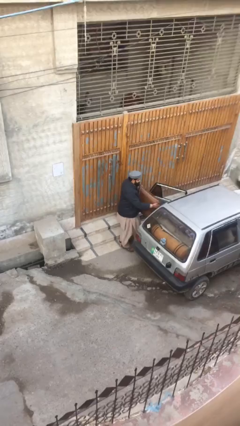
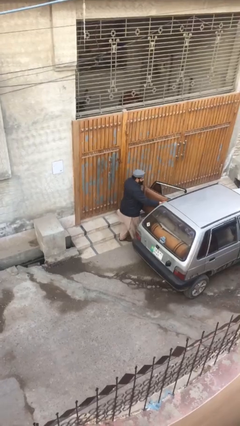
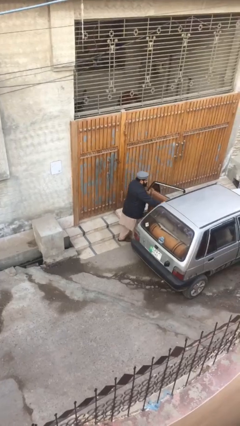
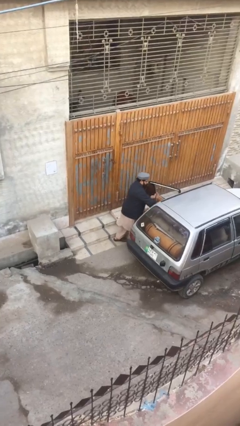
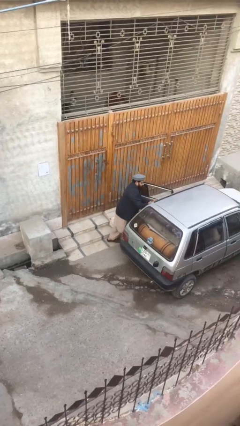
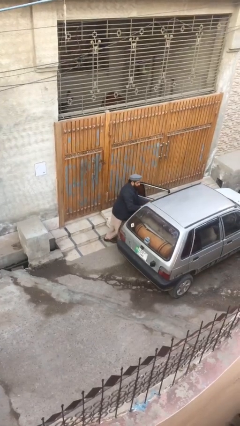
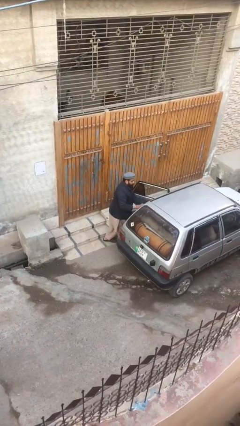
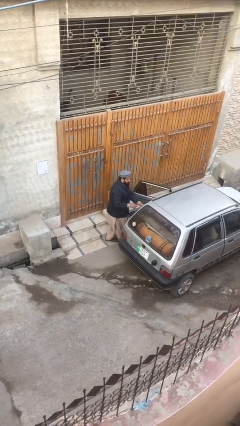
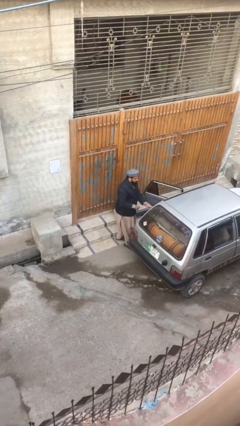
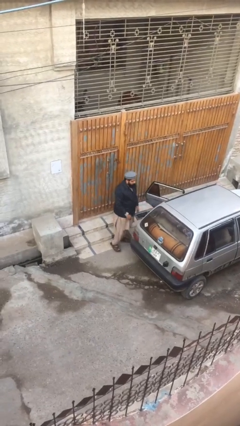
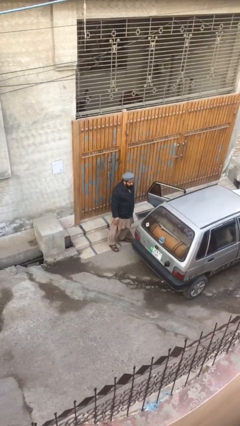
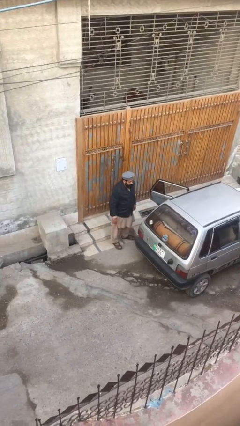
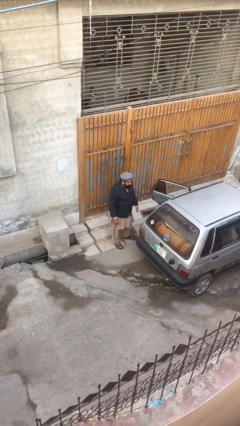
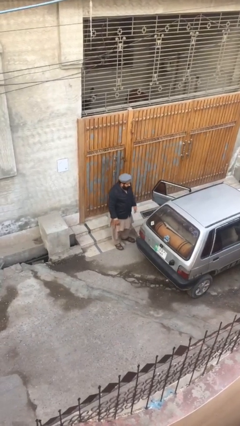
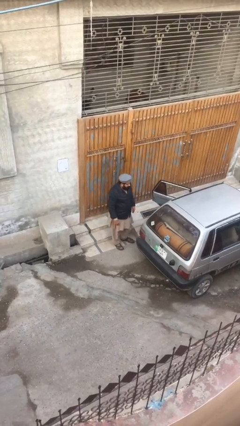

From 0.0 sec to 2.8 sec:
person loads car

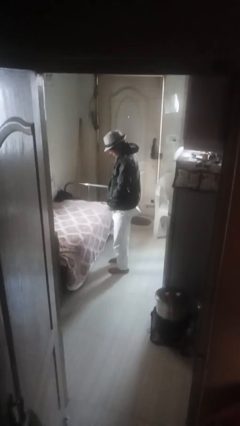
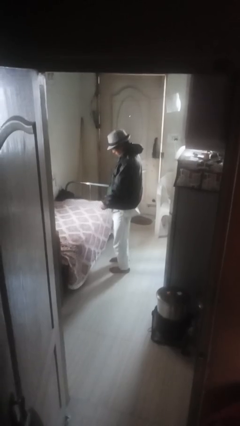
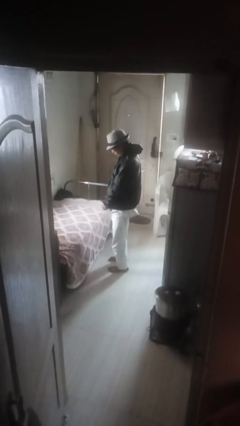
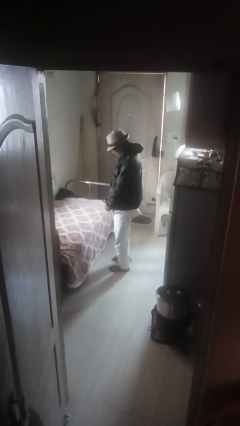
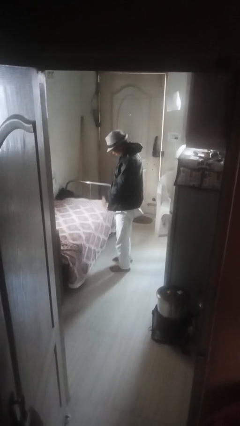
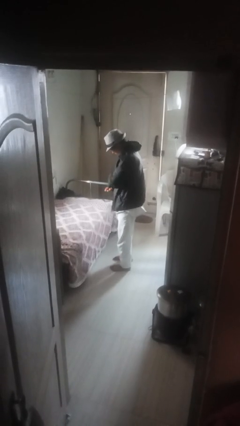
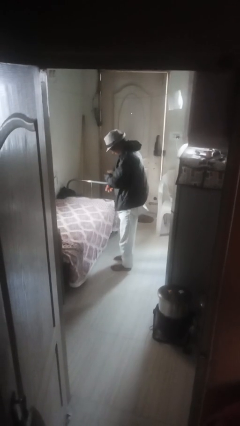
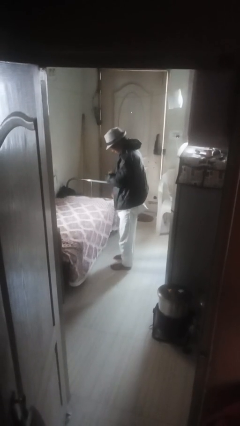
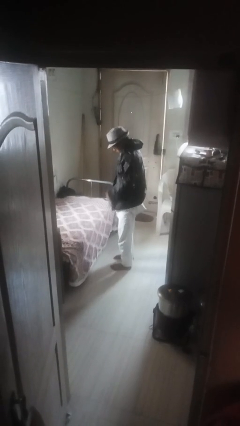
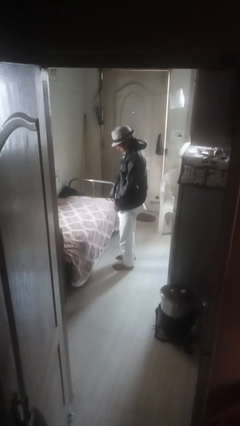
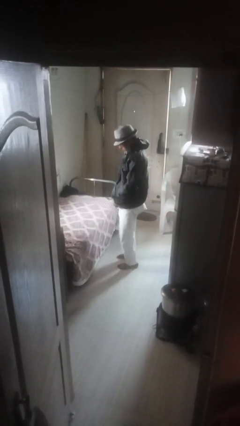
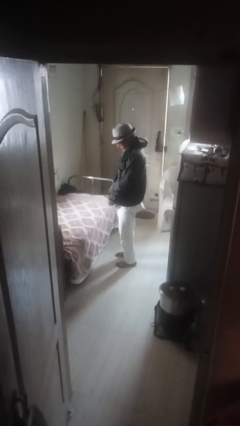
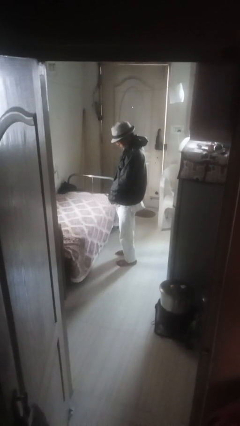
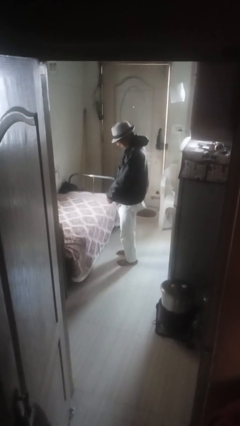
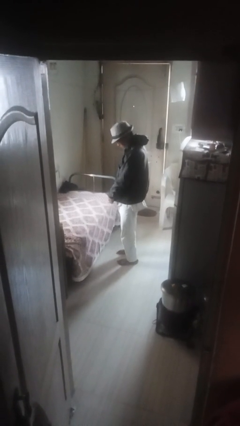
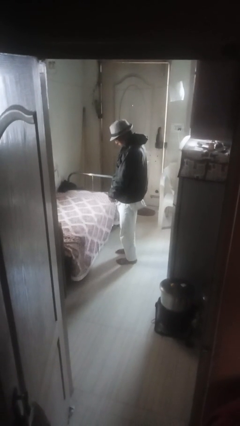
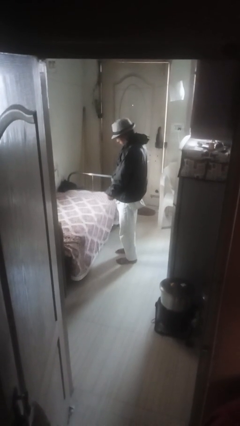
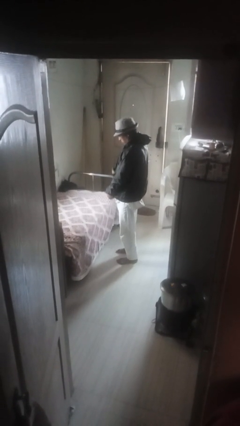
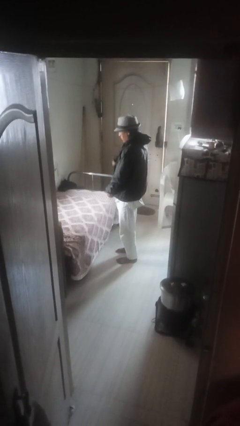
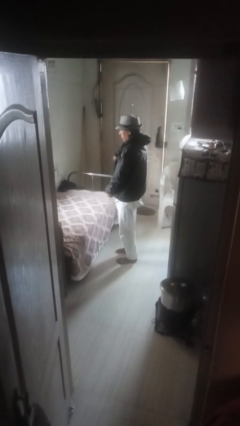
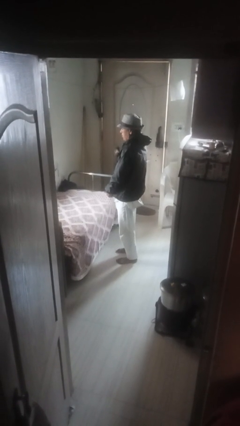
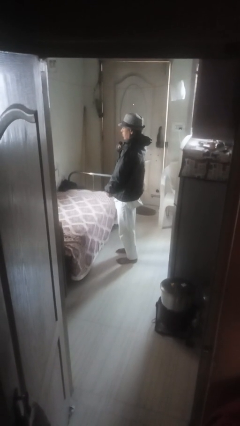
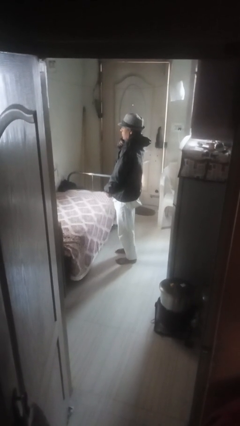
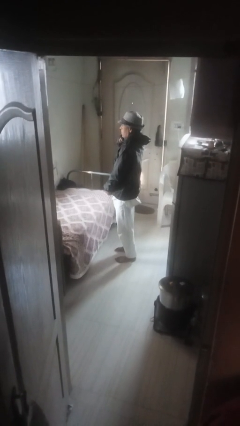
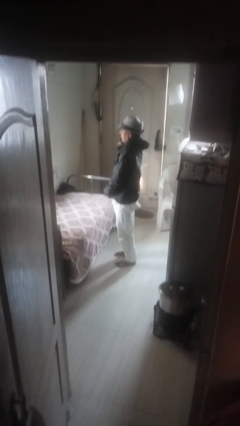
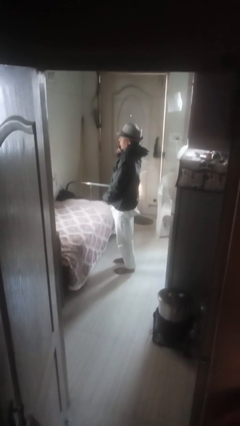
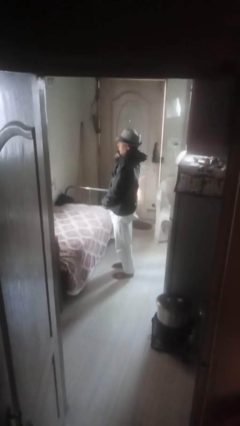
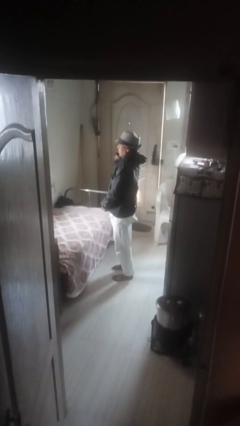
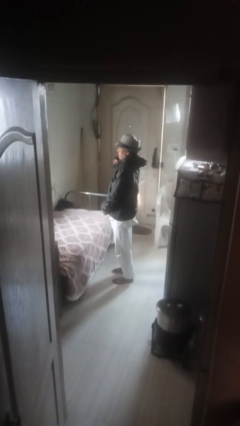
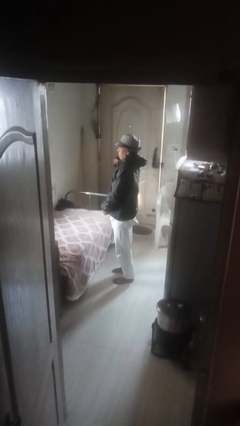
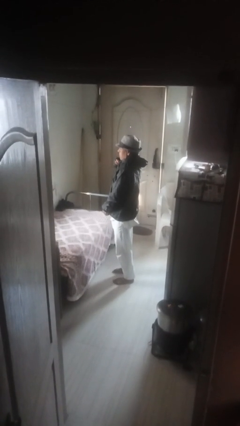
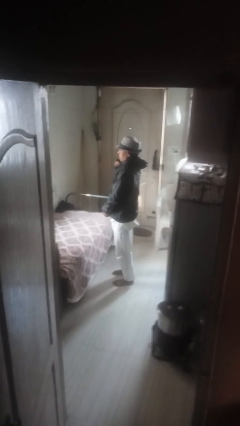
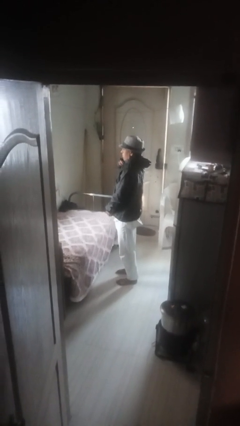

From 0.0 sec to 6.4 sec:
person zips up jacket

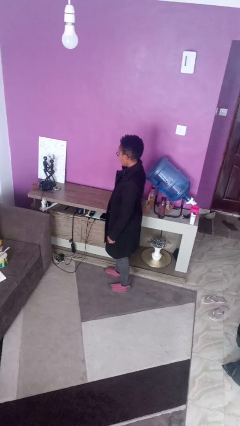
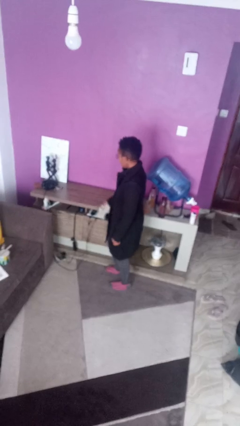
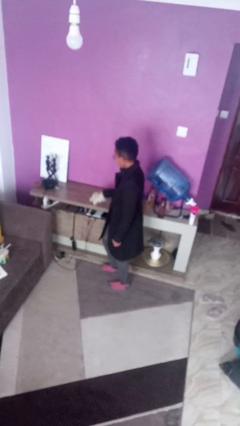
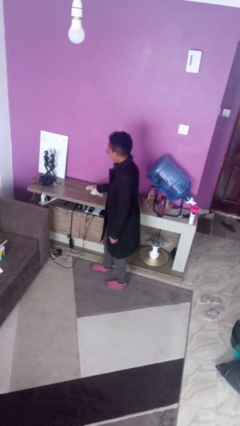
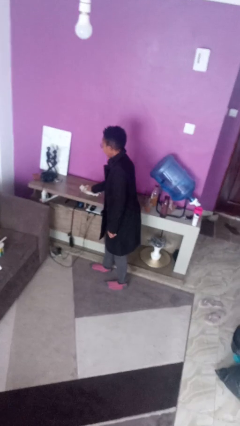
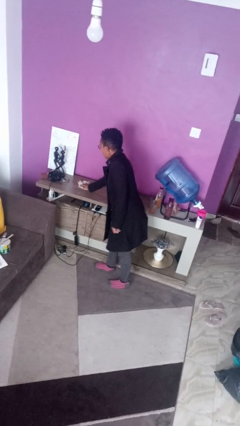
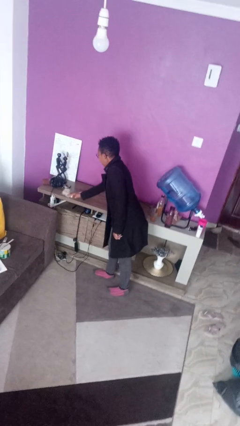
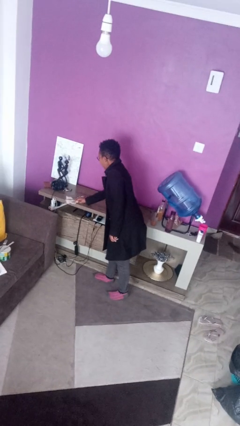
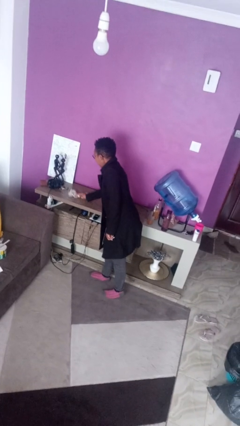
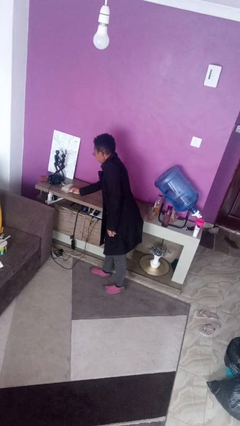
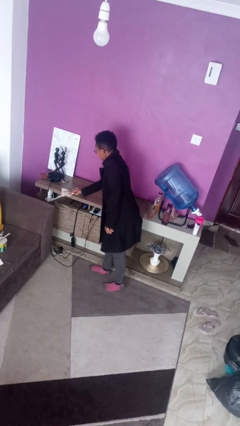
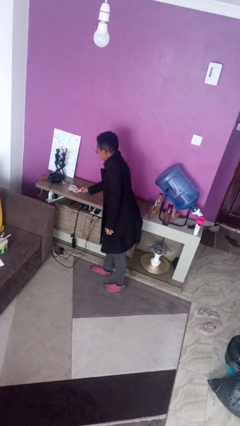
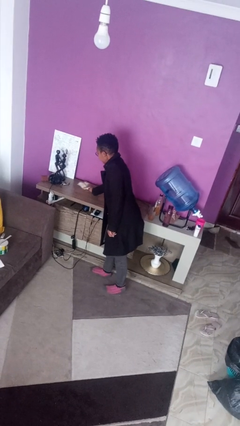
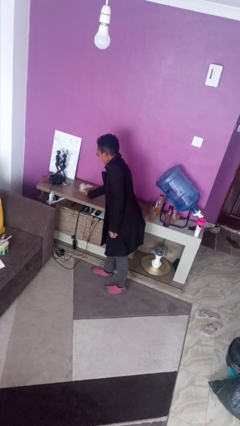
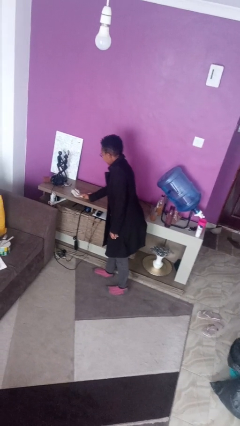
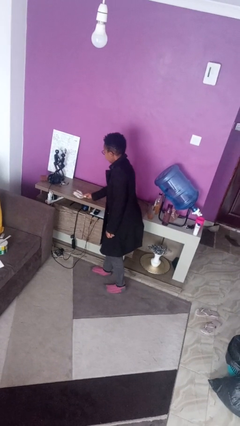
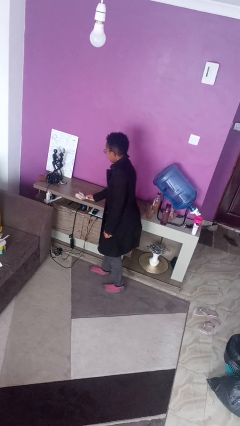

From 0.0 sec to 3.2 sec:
person cleans table with rag

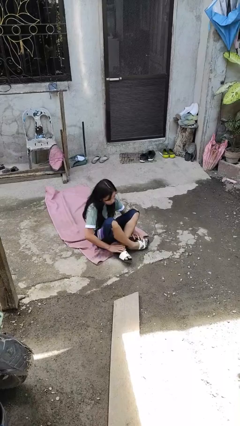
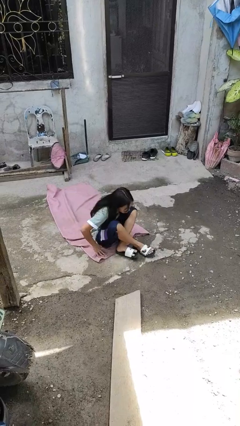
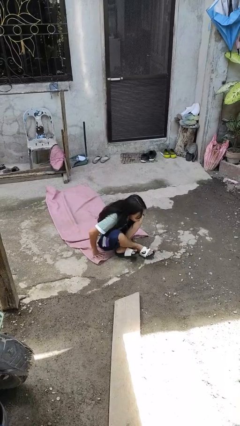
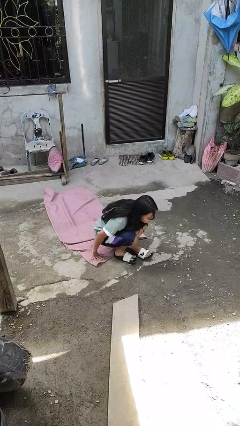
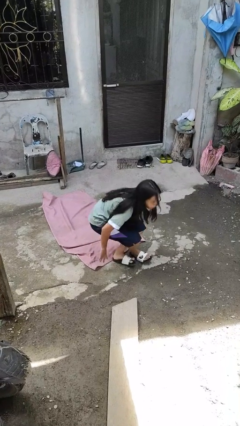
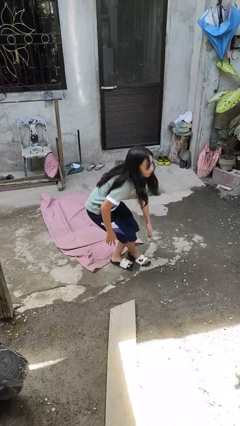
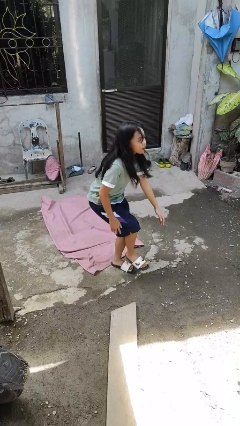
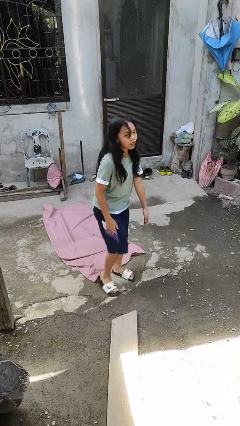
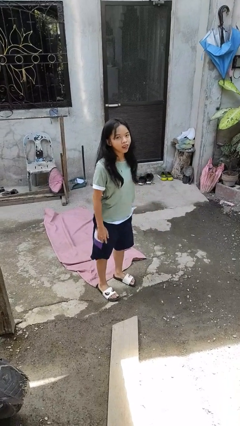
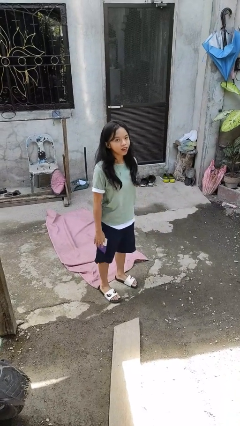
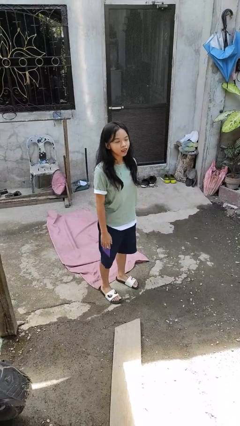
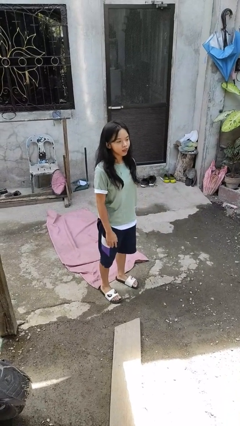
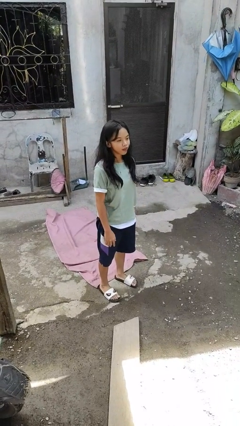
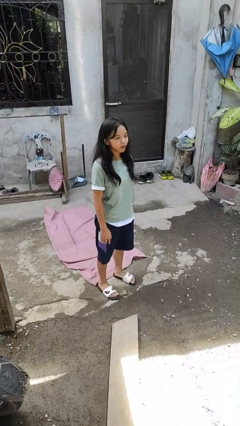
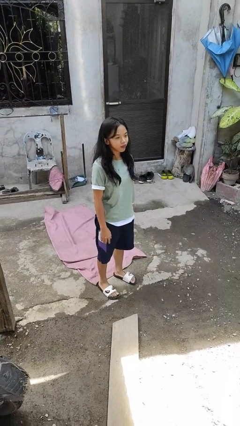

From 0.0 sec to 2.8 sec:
person stands up from floor

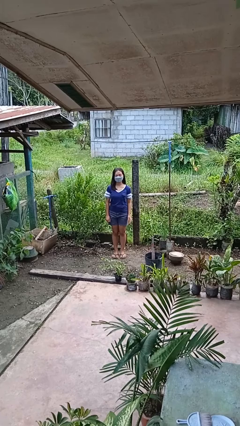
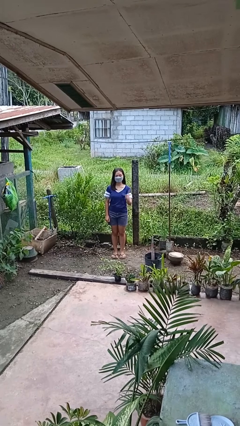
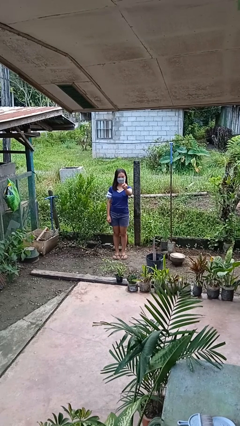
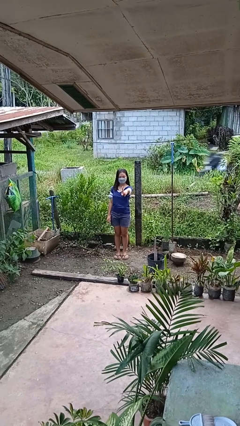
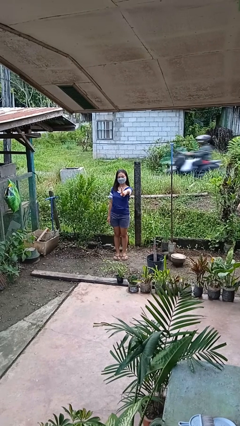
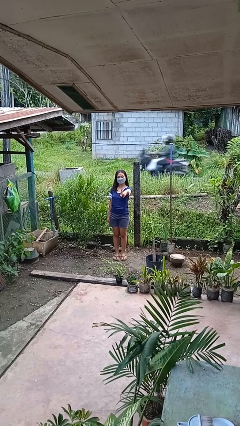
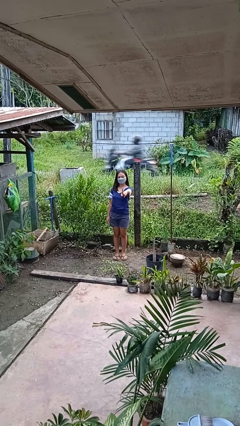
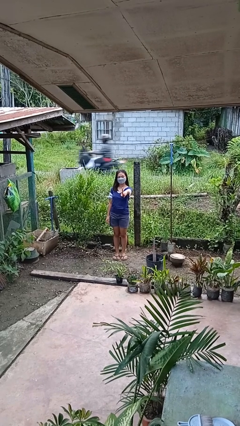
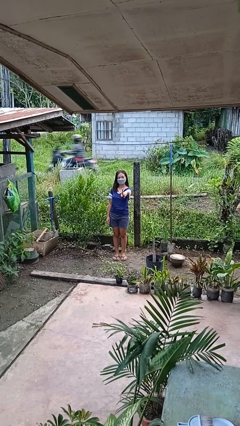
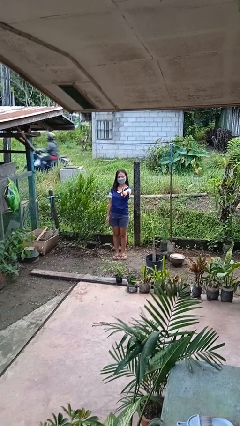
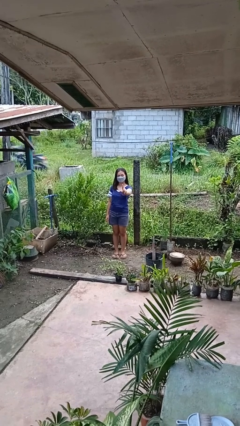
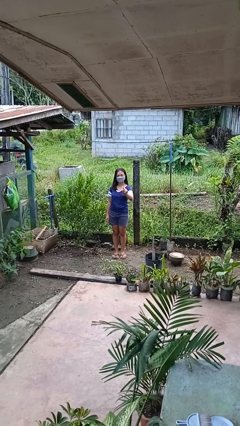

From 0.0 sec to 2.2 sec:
person gestures number one

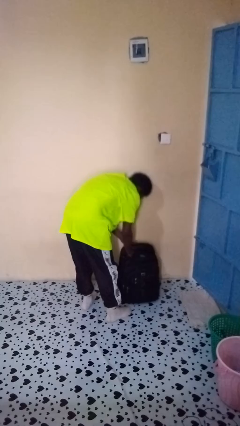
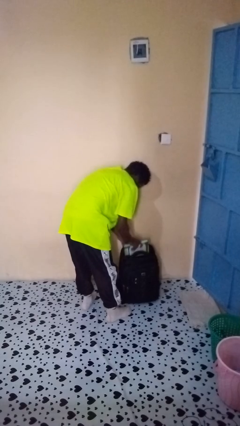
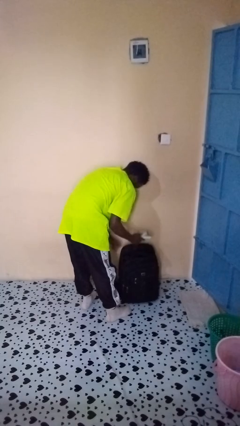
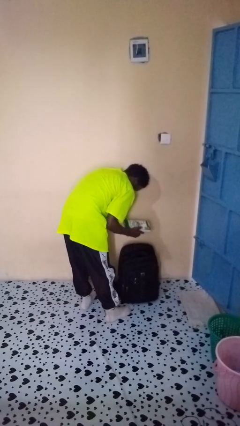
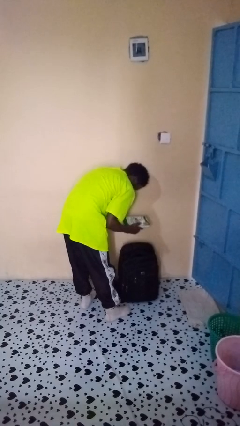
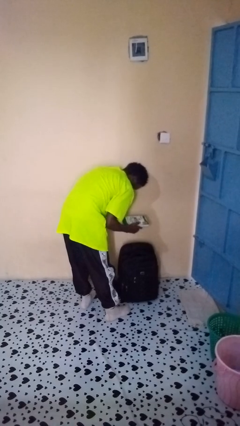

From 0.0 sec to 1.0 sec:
person takes object from backpack
